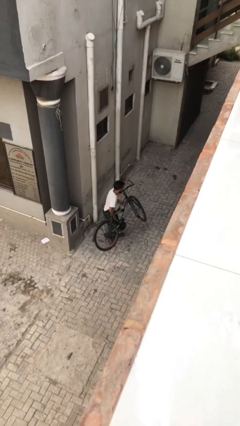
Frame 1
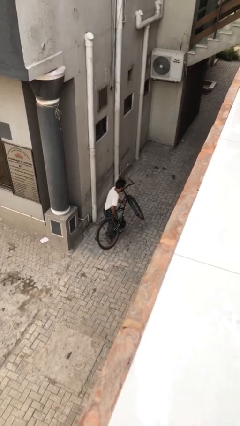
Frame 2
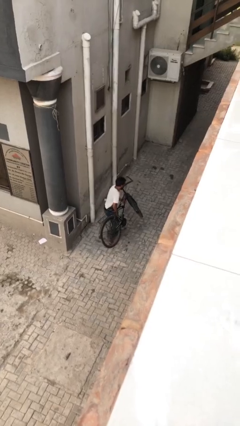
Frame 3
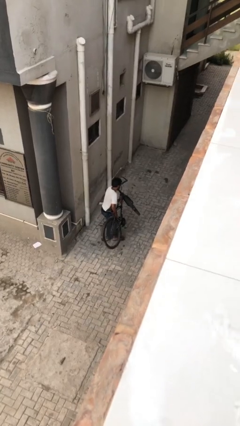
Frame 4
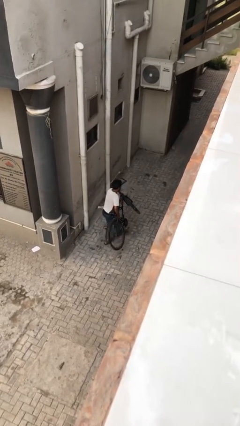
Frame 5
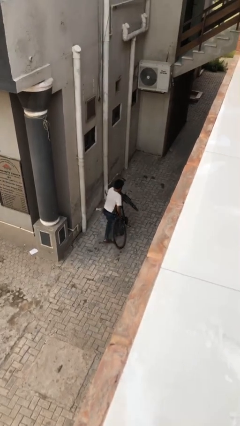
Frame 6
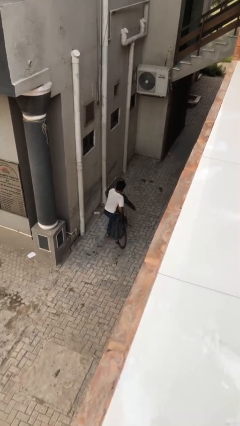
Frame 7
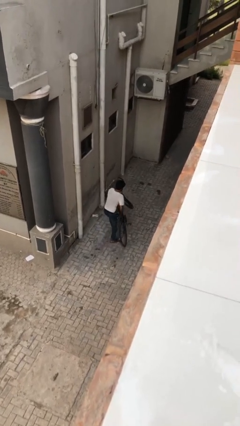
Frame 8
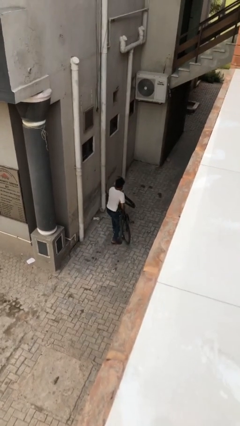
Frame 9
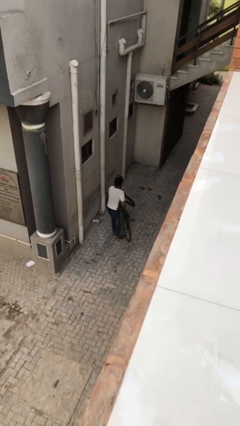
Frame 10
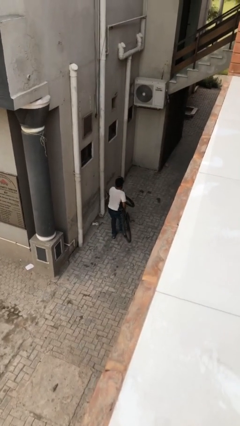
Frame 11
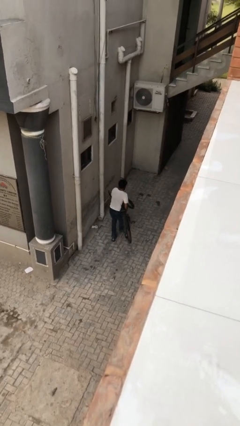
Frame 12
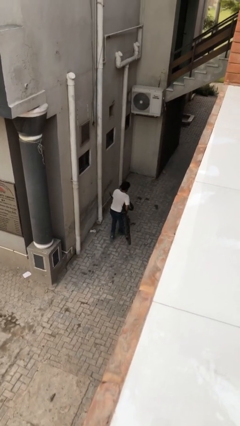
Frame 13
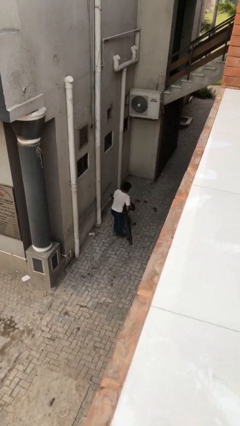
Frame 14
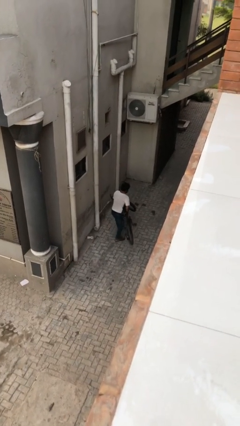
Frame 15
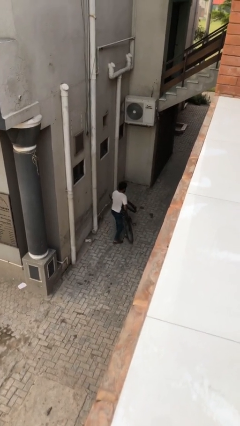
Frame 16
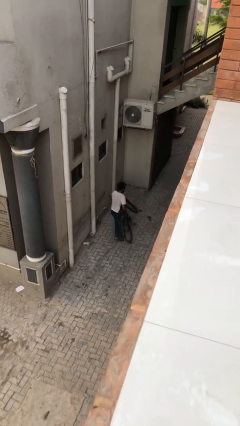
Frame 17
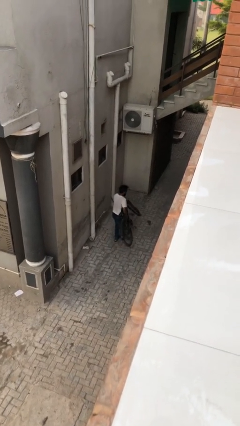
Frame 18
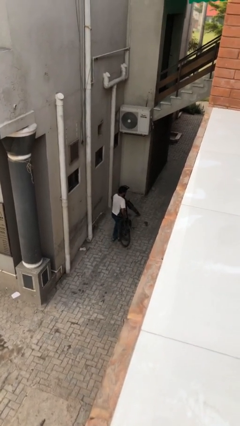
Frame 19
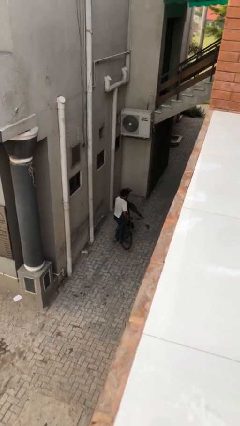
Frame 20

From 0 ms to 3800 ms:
person carries heavy object

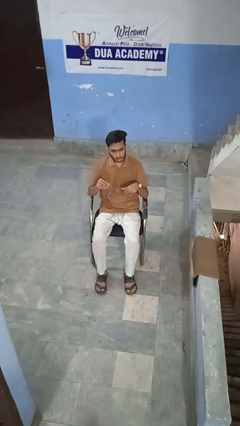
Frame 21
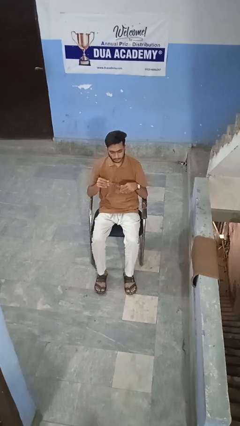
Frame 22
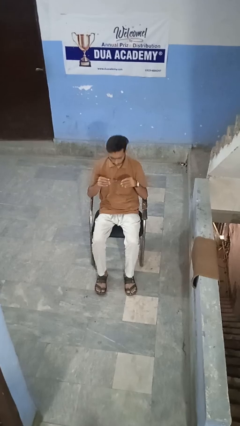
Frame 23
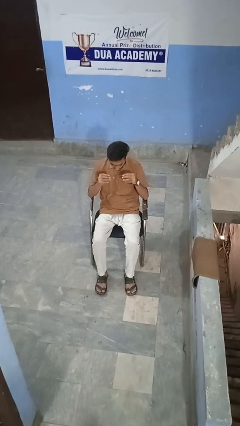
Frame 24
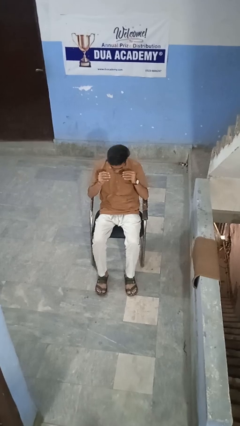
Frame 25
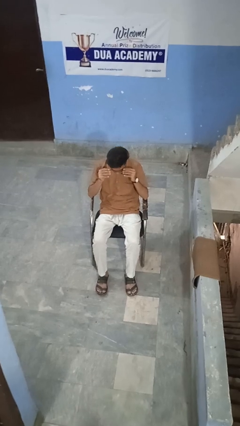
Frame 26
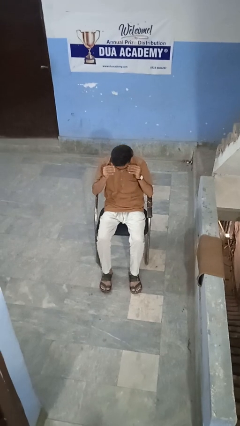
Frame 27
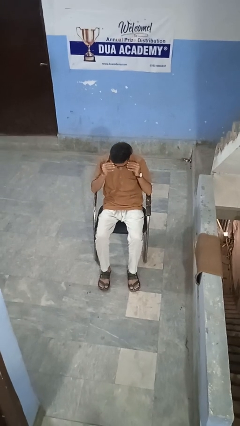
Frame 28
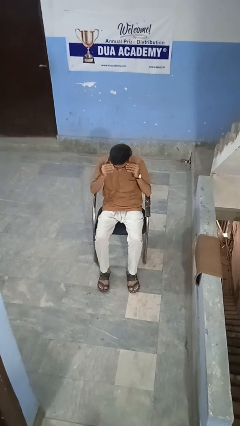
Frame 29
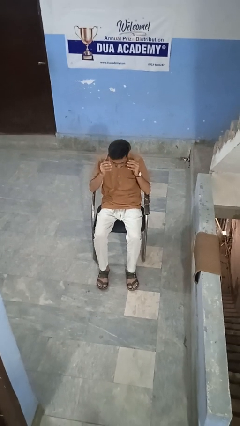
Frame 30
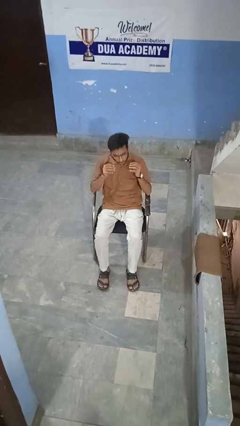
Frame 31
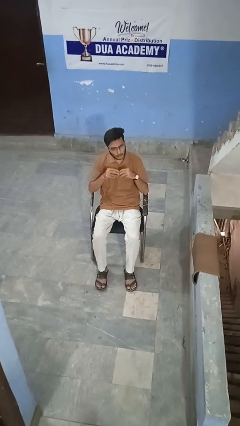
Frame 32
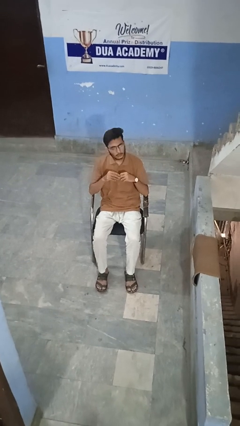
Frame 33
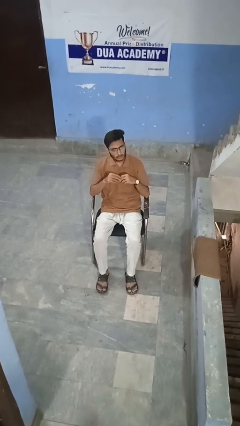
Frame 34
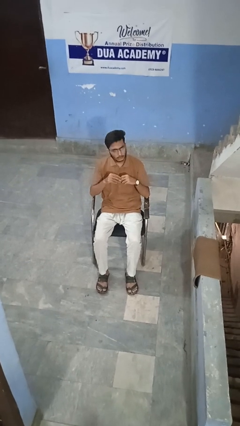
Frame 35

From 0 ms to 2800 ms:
person puts on glasses

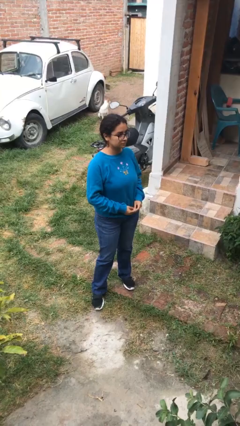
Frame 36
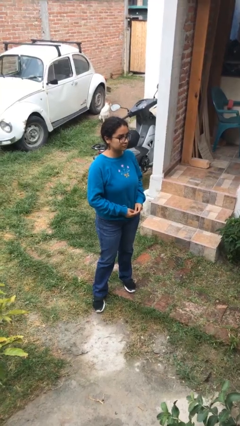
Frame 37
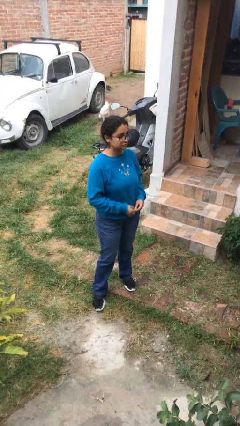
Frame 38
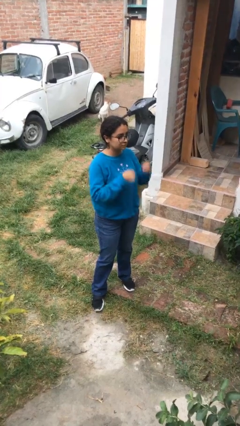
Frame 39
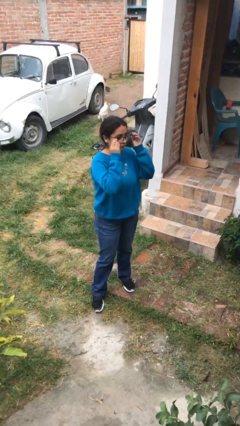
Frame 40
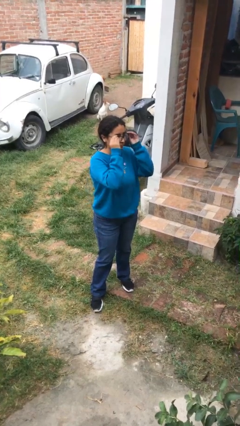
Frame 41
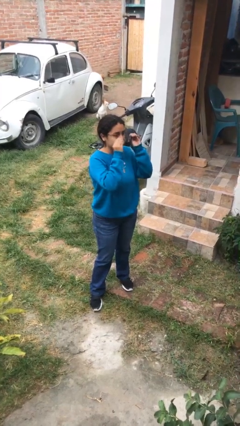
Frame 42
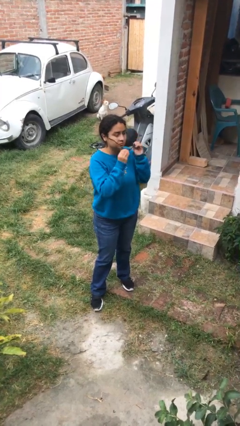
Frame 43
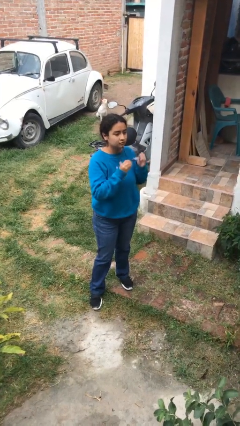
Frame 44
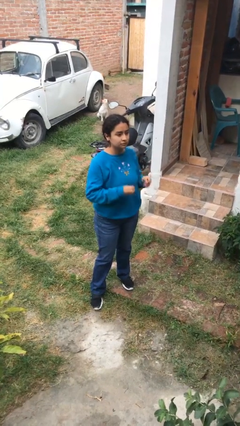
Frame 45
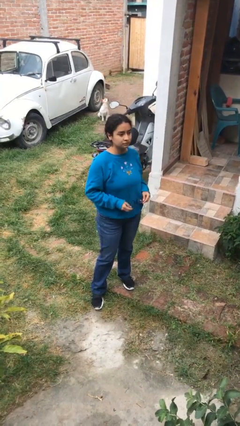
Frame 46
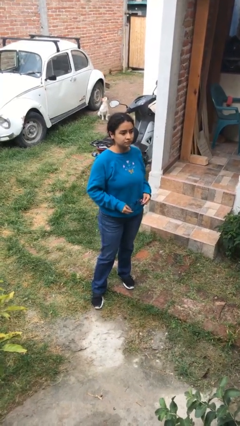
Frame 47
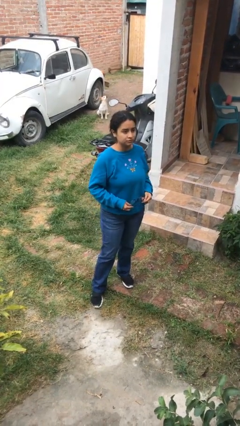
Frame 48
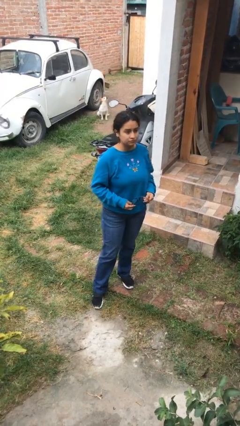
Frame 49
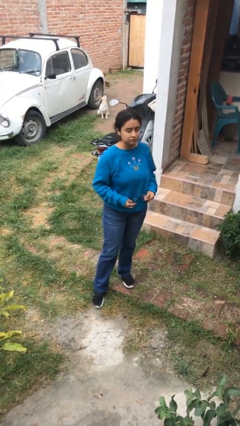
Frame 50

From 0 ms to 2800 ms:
person takes off glasses

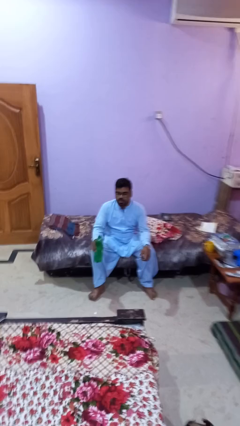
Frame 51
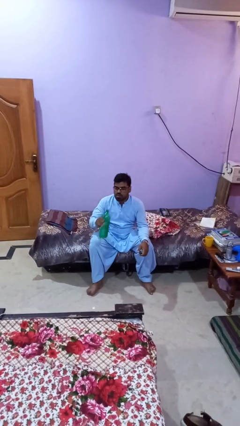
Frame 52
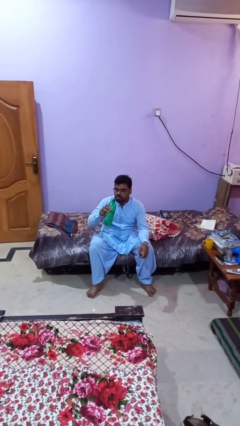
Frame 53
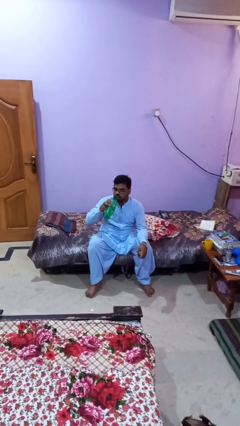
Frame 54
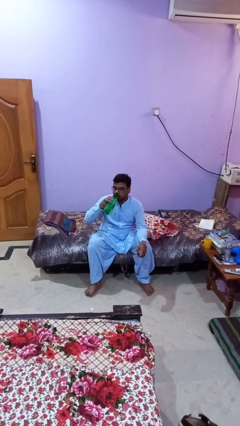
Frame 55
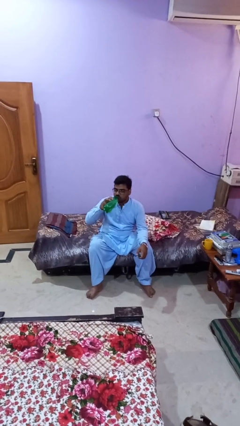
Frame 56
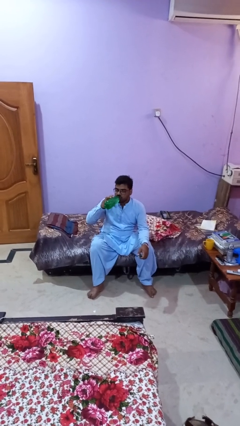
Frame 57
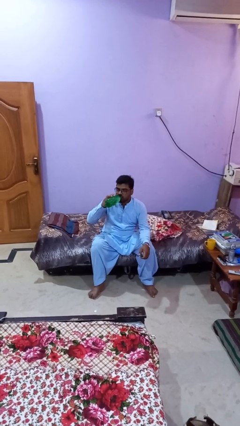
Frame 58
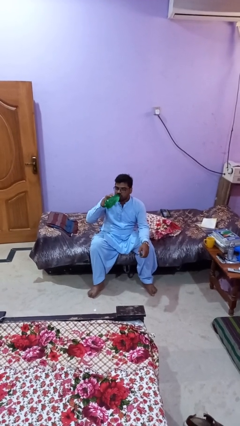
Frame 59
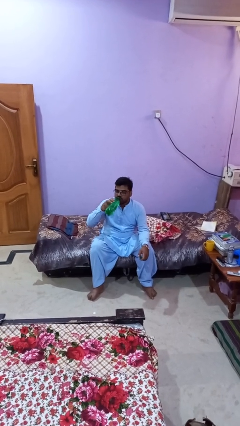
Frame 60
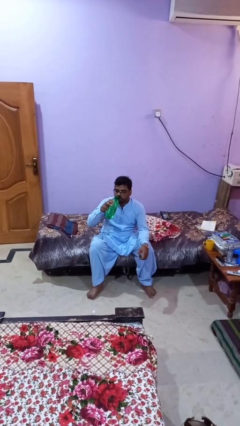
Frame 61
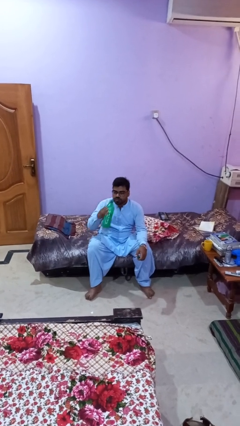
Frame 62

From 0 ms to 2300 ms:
person drinks from bottle

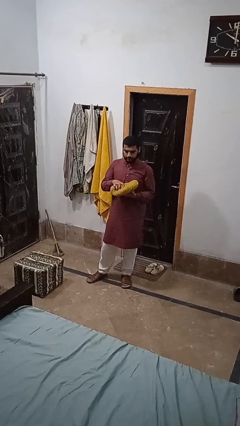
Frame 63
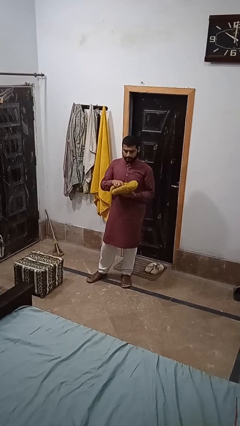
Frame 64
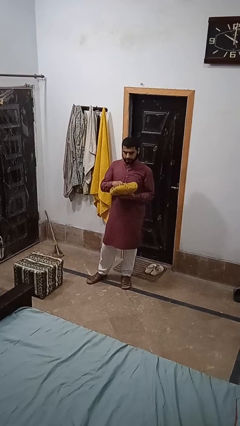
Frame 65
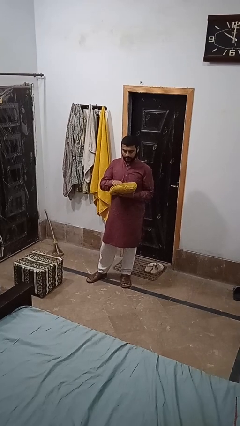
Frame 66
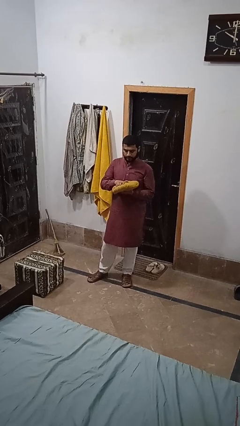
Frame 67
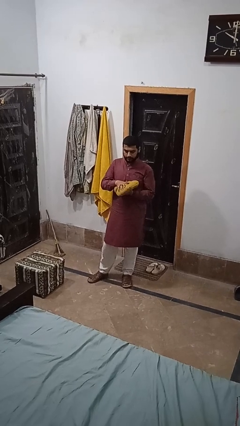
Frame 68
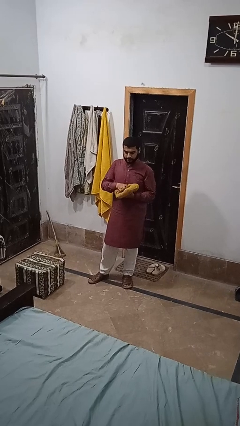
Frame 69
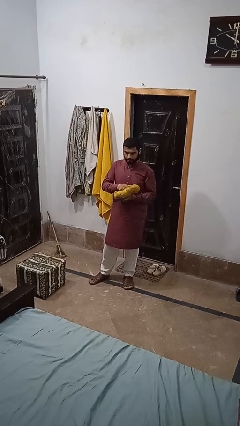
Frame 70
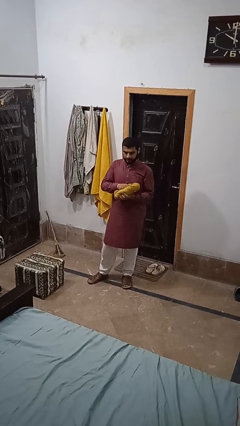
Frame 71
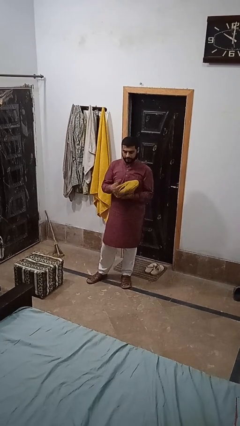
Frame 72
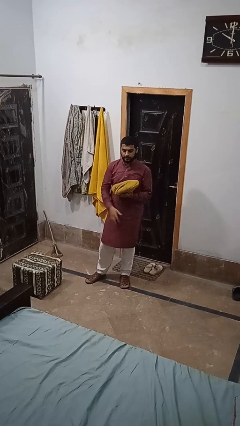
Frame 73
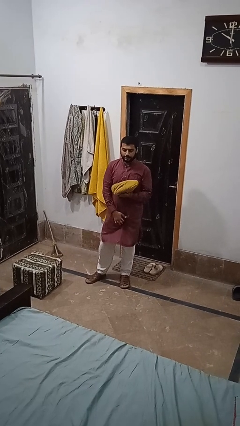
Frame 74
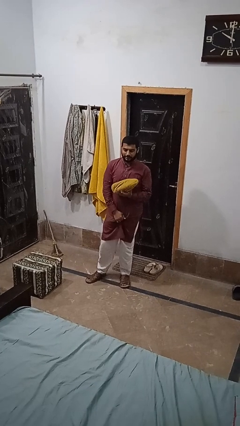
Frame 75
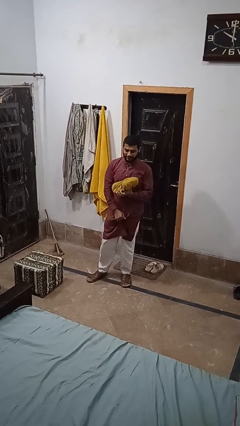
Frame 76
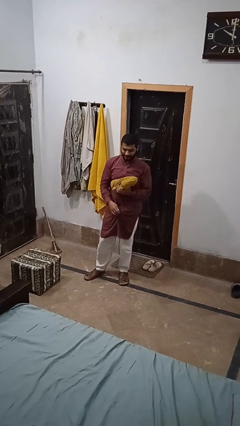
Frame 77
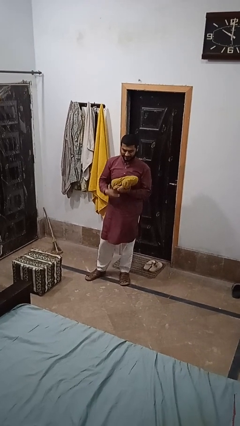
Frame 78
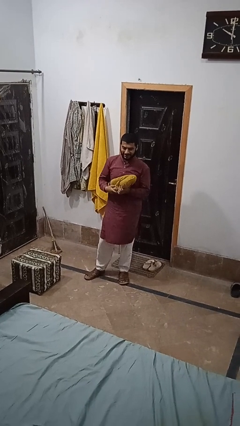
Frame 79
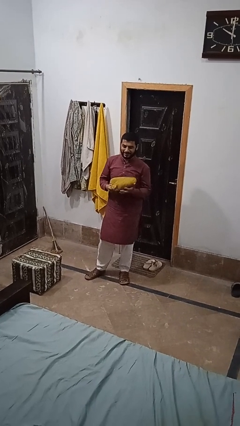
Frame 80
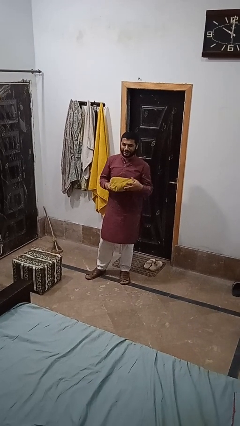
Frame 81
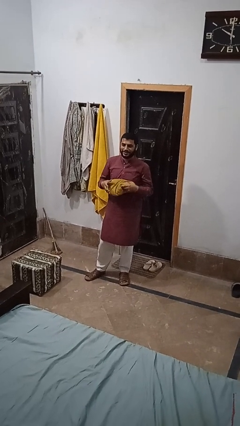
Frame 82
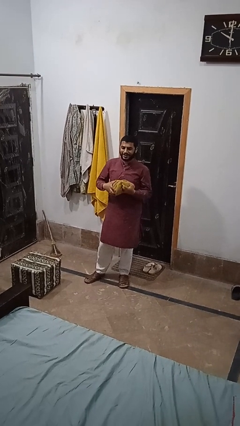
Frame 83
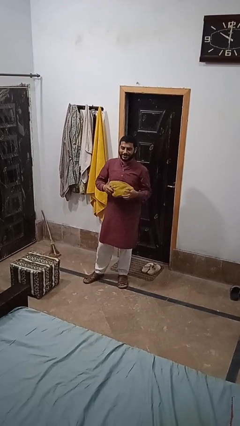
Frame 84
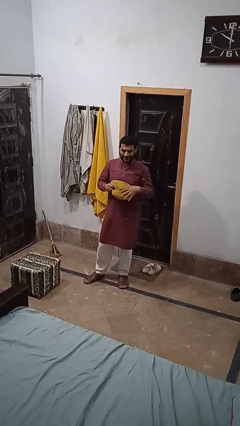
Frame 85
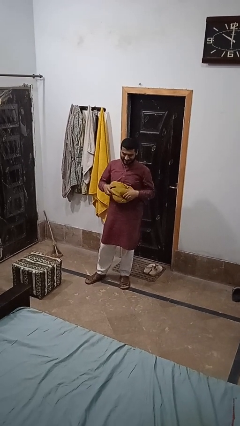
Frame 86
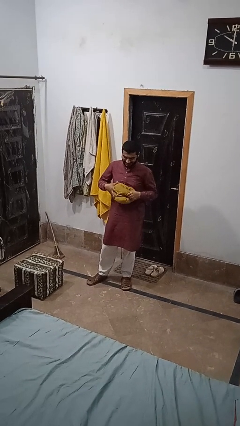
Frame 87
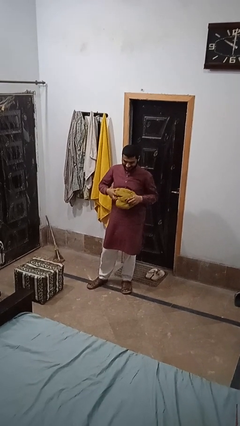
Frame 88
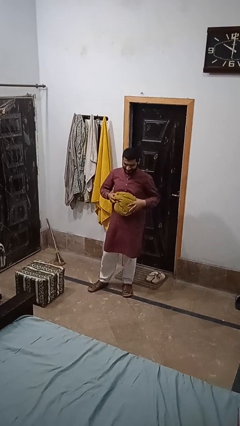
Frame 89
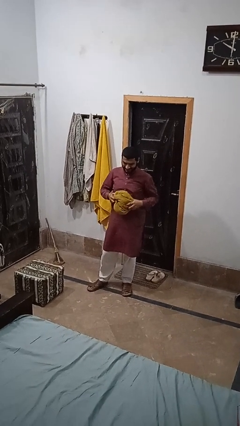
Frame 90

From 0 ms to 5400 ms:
person squeezes object

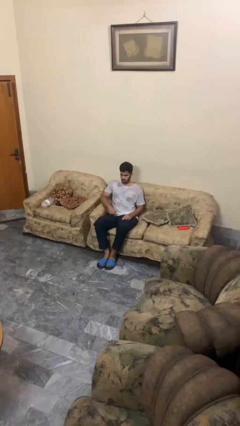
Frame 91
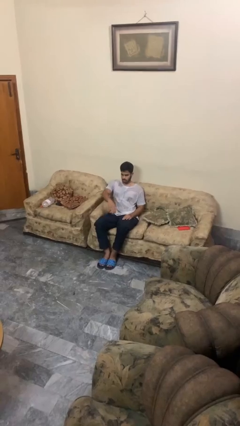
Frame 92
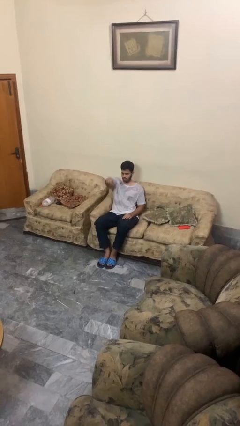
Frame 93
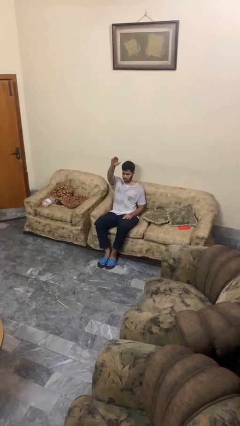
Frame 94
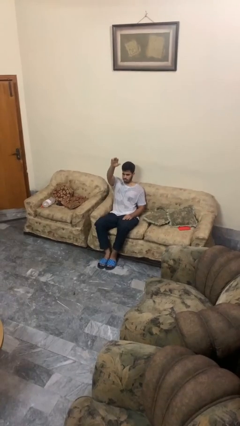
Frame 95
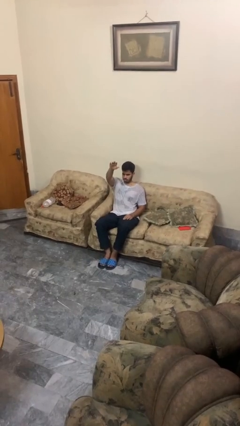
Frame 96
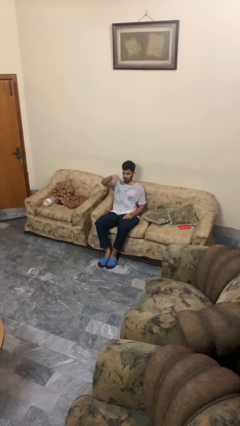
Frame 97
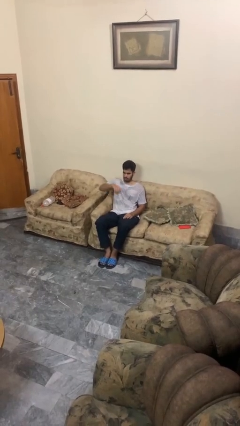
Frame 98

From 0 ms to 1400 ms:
person gestures swipe up
